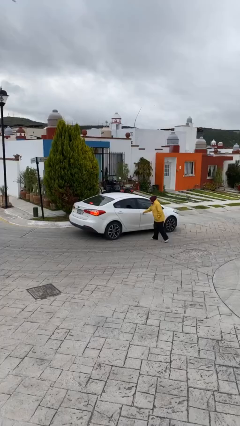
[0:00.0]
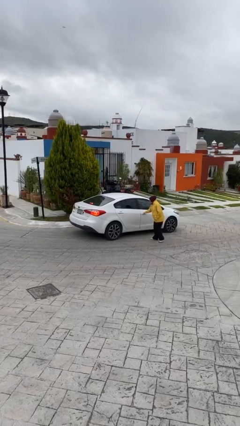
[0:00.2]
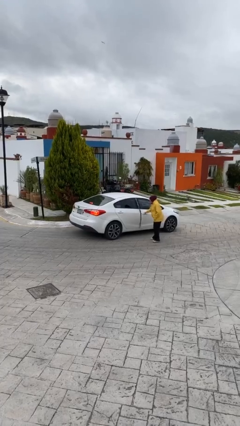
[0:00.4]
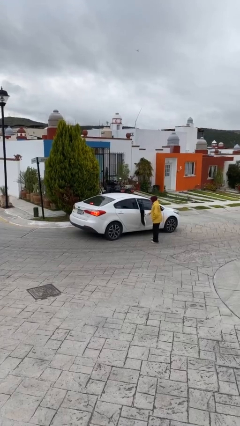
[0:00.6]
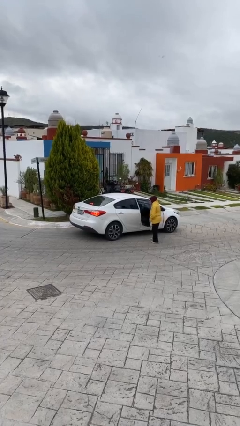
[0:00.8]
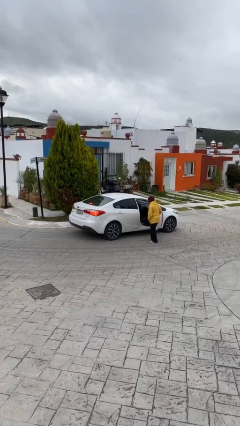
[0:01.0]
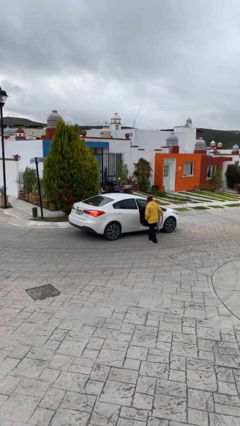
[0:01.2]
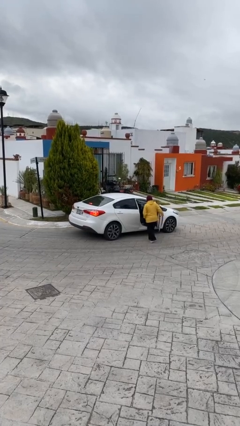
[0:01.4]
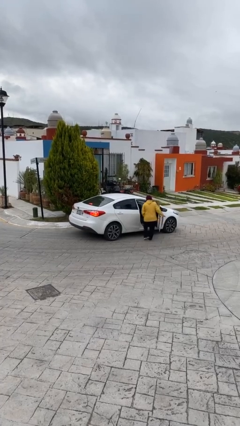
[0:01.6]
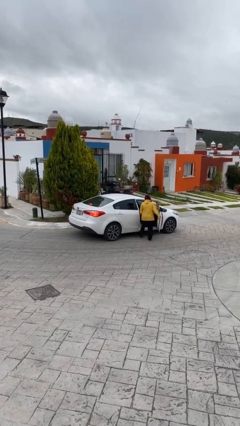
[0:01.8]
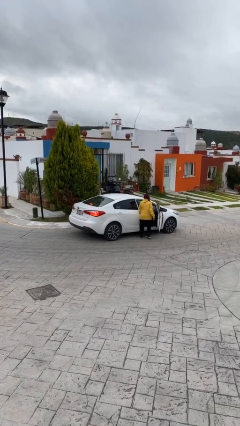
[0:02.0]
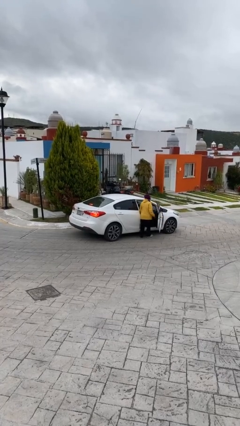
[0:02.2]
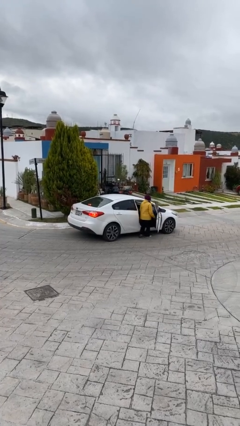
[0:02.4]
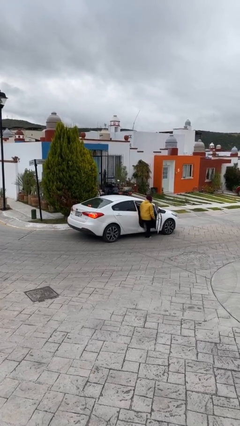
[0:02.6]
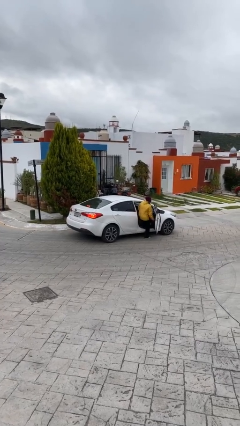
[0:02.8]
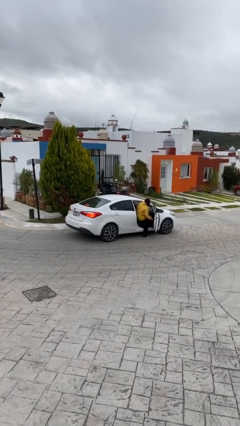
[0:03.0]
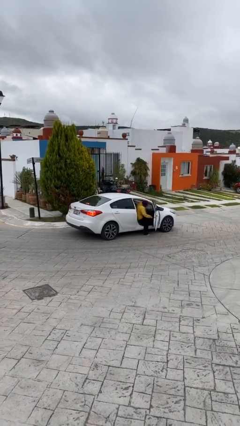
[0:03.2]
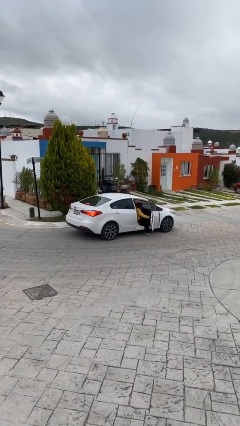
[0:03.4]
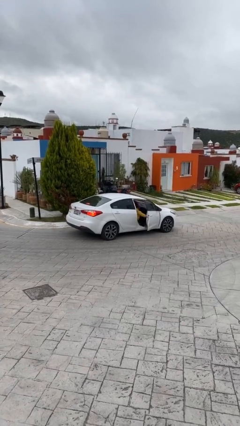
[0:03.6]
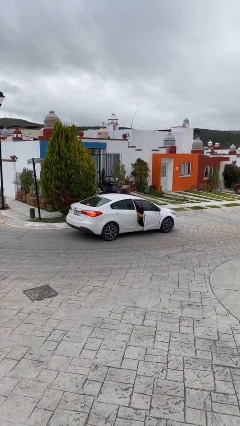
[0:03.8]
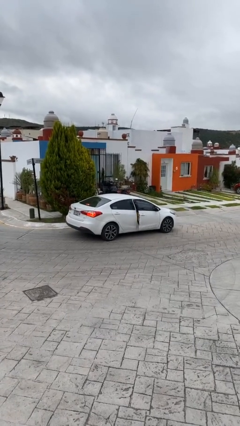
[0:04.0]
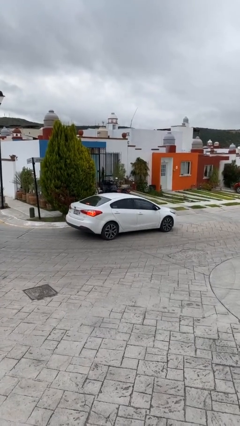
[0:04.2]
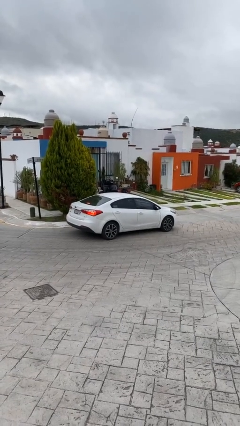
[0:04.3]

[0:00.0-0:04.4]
car picks up person

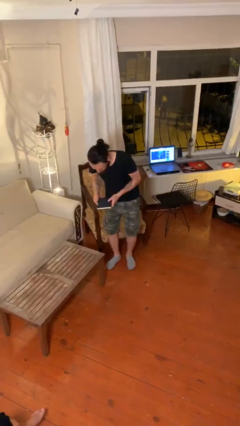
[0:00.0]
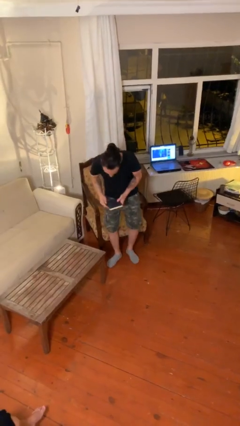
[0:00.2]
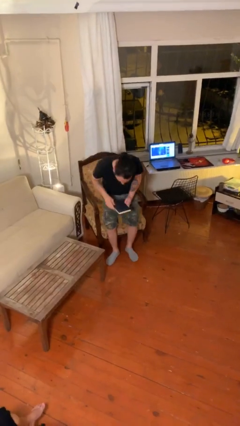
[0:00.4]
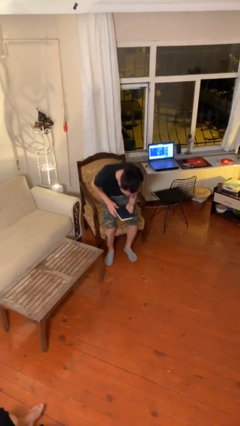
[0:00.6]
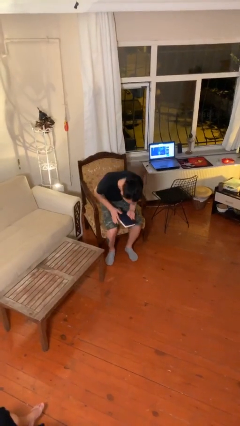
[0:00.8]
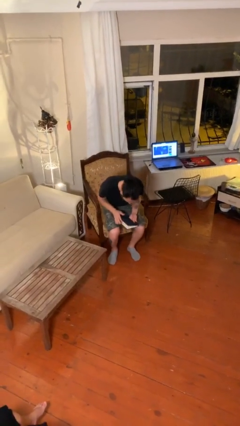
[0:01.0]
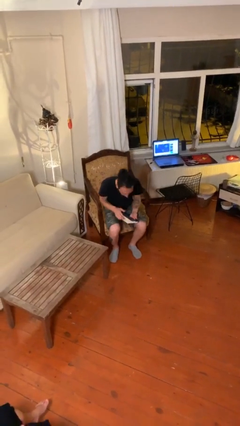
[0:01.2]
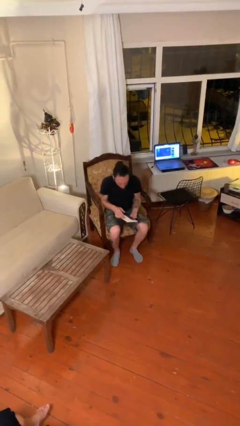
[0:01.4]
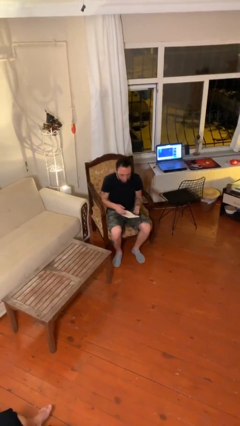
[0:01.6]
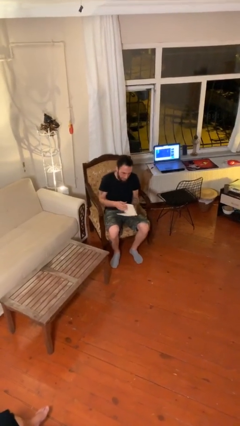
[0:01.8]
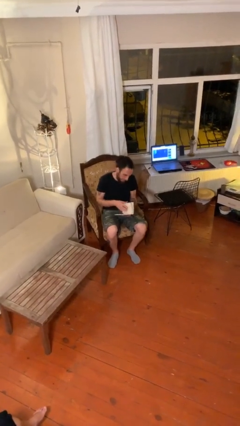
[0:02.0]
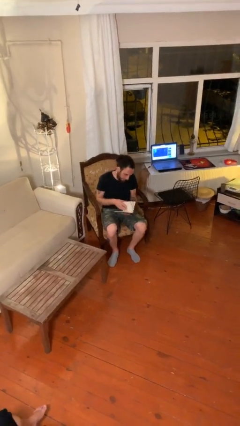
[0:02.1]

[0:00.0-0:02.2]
person sits down

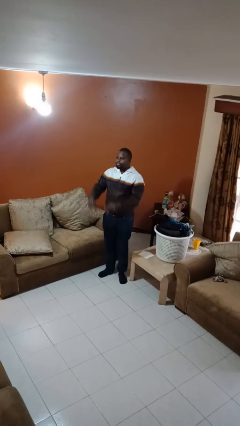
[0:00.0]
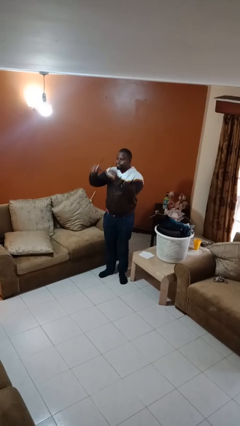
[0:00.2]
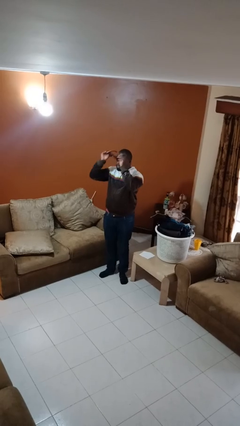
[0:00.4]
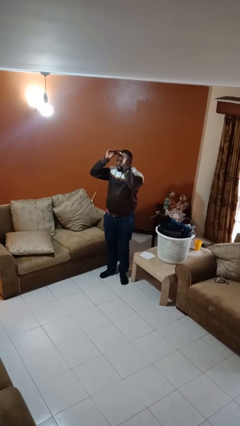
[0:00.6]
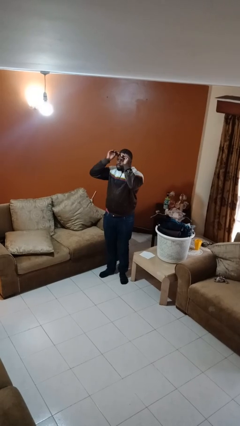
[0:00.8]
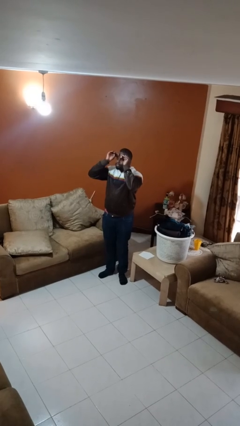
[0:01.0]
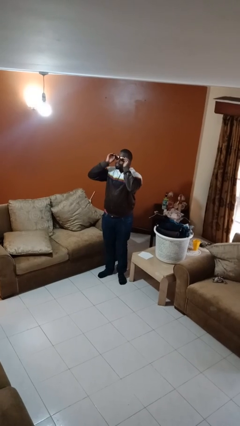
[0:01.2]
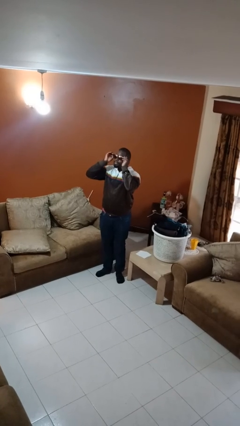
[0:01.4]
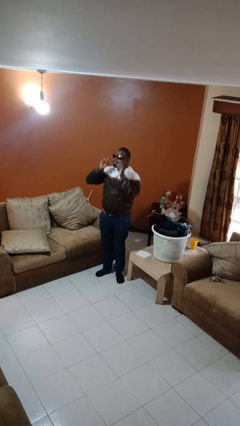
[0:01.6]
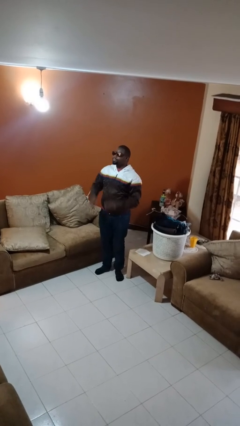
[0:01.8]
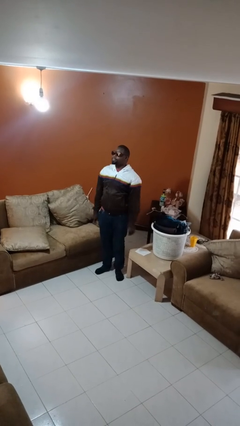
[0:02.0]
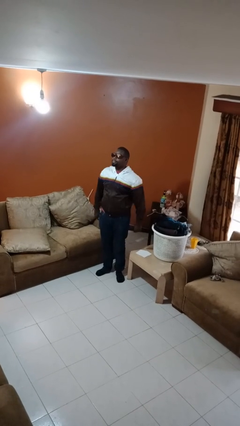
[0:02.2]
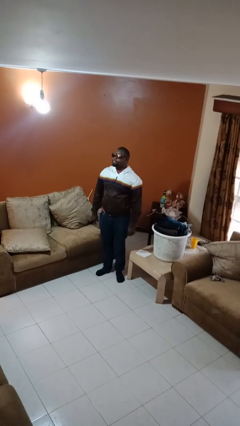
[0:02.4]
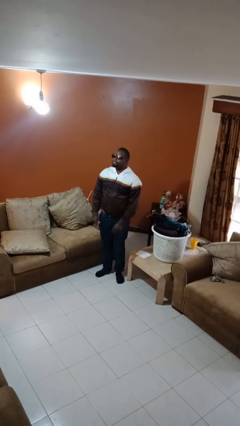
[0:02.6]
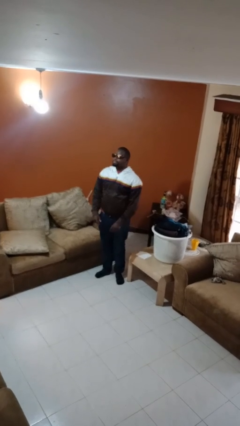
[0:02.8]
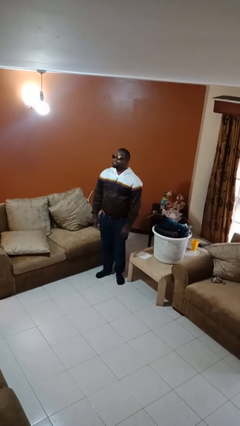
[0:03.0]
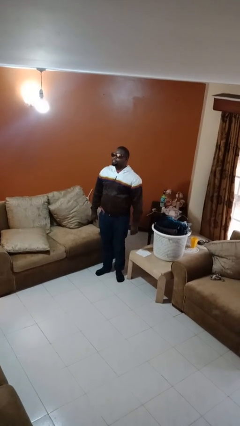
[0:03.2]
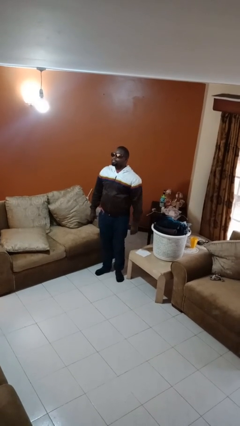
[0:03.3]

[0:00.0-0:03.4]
person puts on sunglasses

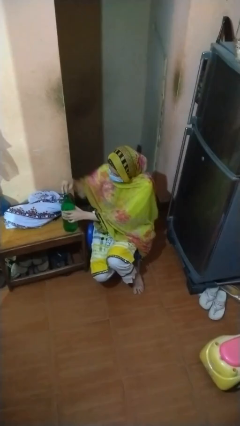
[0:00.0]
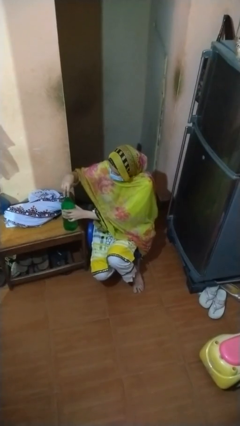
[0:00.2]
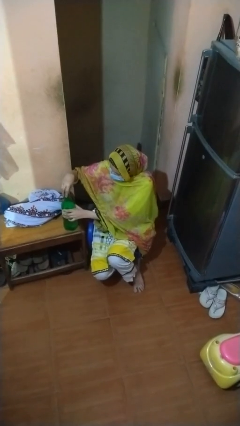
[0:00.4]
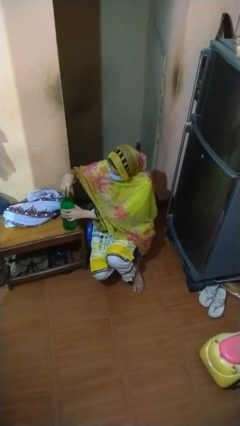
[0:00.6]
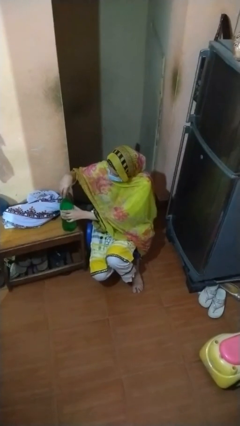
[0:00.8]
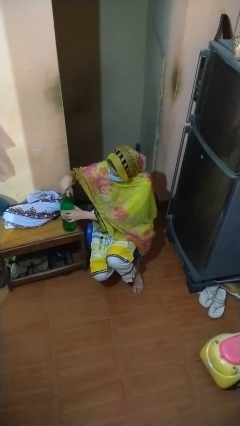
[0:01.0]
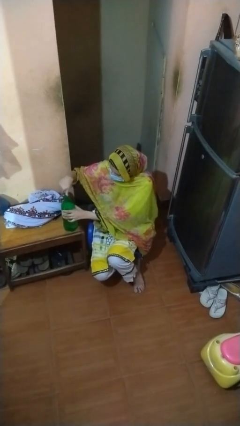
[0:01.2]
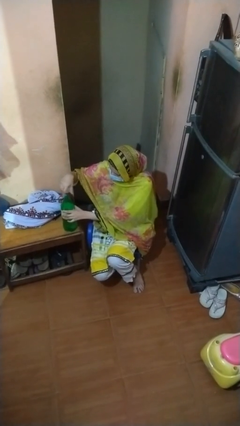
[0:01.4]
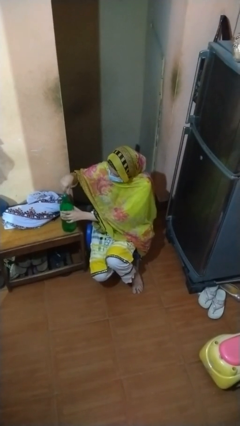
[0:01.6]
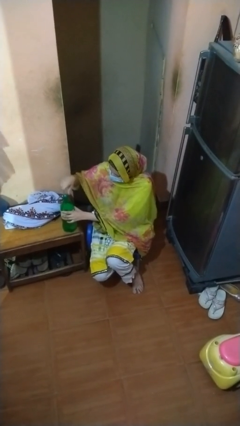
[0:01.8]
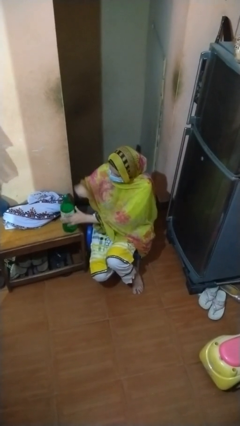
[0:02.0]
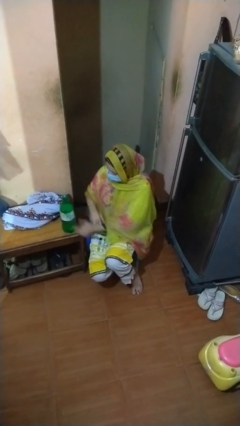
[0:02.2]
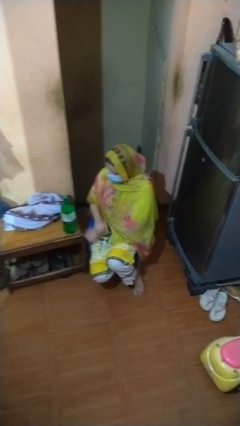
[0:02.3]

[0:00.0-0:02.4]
person screws lid to bottle

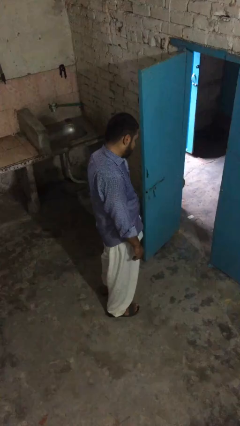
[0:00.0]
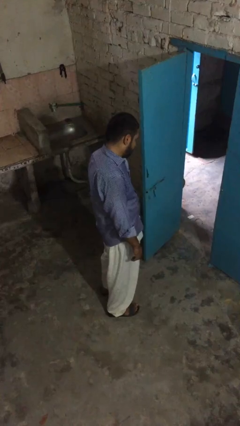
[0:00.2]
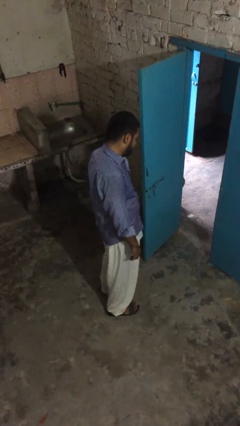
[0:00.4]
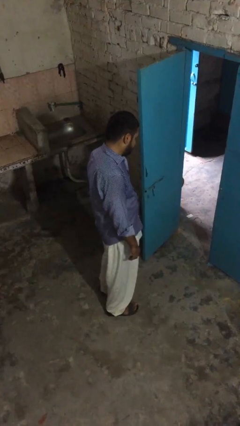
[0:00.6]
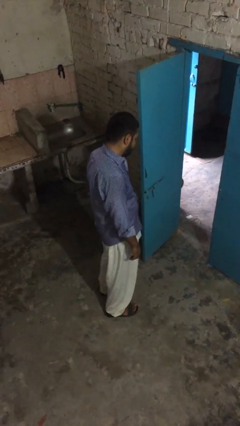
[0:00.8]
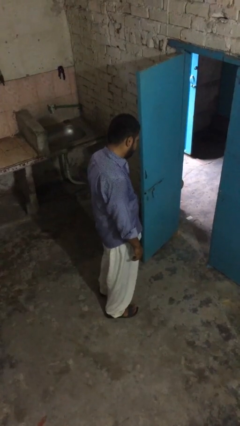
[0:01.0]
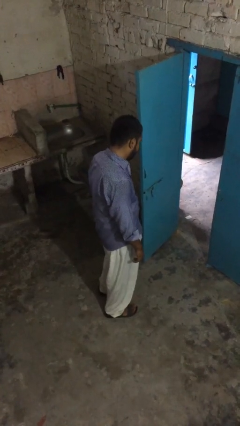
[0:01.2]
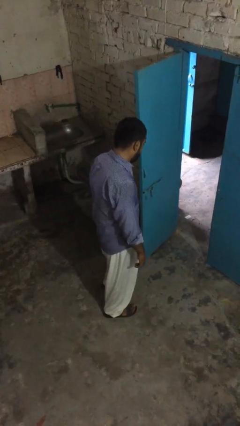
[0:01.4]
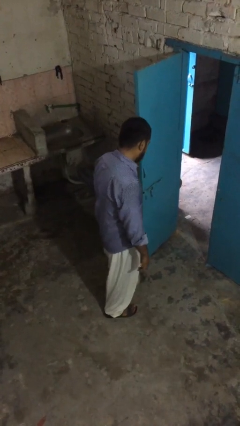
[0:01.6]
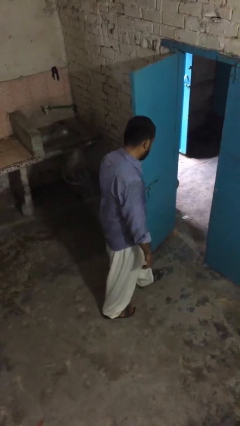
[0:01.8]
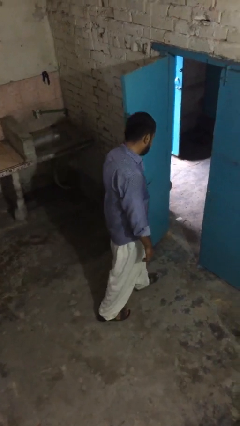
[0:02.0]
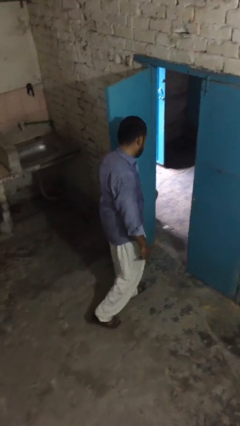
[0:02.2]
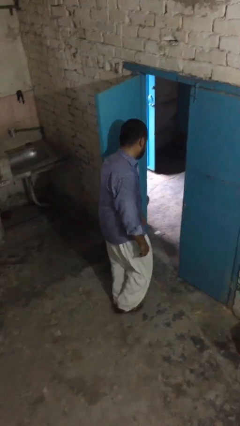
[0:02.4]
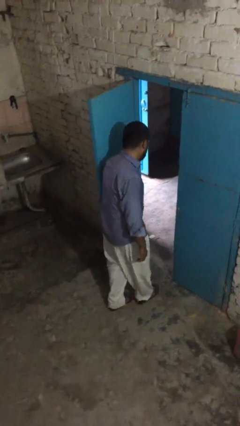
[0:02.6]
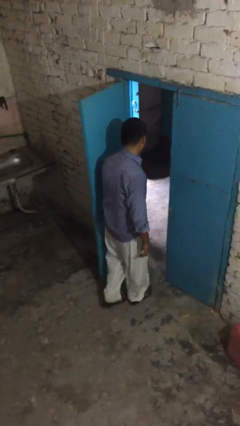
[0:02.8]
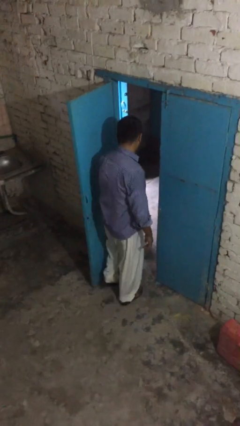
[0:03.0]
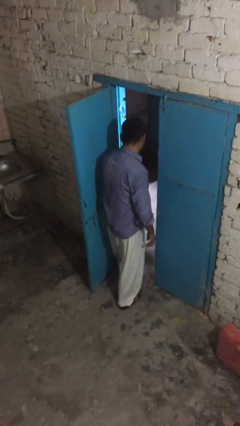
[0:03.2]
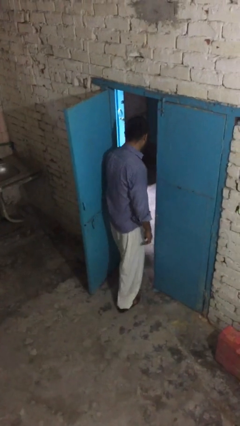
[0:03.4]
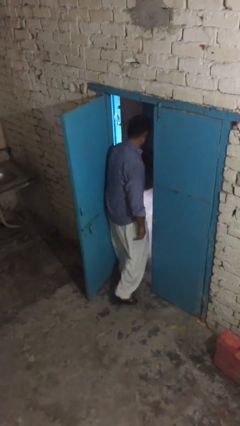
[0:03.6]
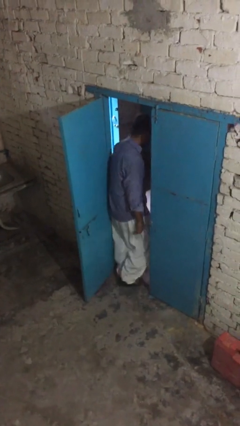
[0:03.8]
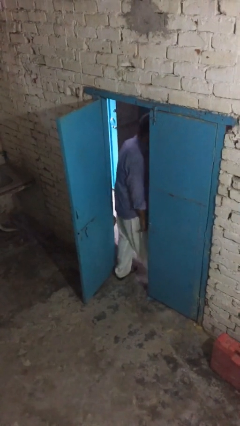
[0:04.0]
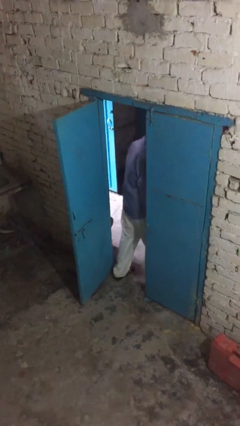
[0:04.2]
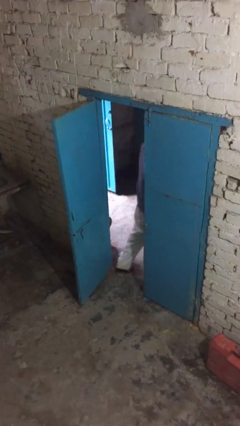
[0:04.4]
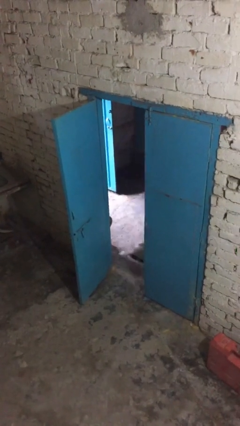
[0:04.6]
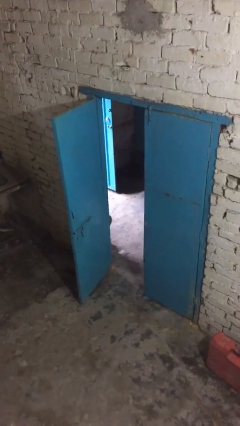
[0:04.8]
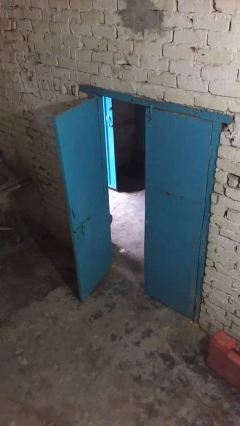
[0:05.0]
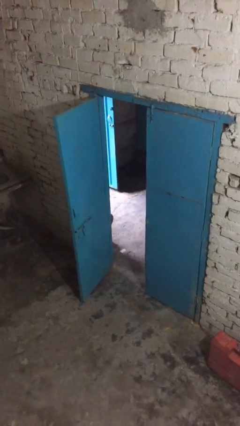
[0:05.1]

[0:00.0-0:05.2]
person exits scene through structure
